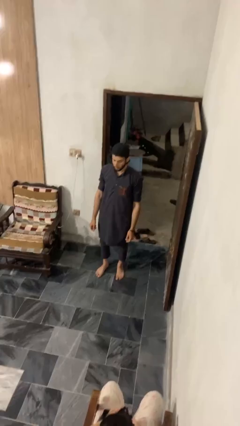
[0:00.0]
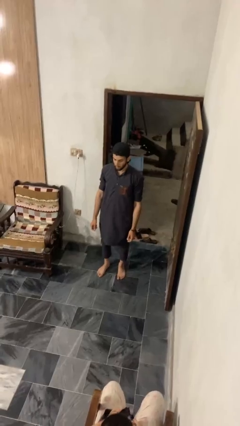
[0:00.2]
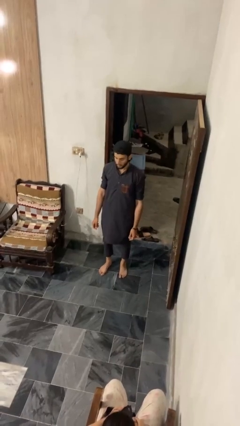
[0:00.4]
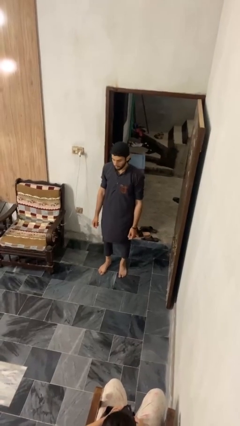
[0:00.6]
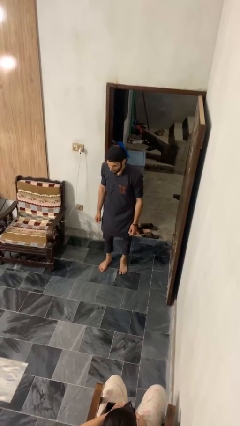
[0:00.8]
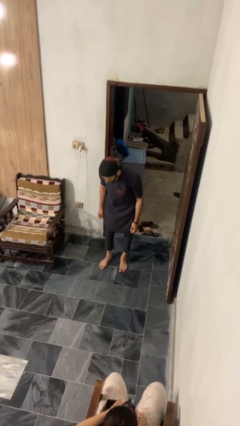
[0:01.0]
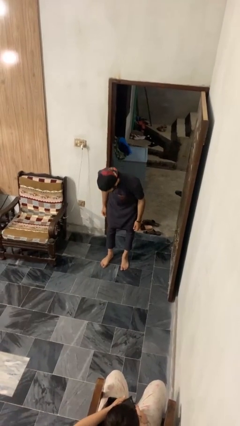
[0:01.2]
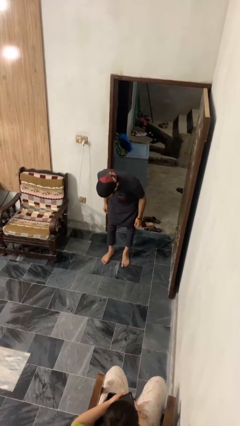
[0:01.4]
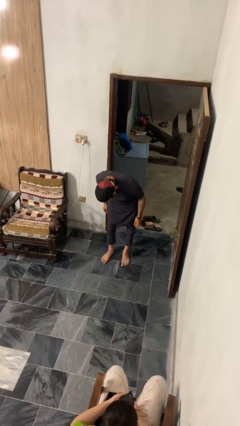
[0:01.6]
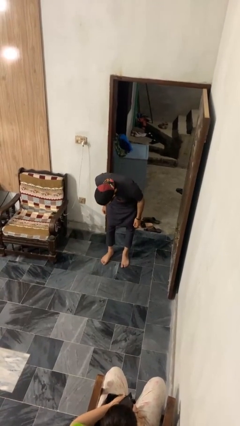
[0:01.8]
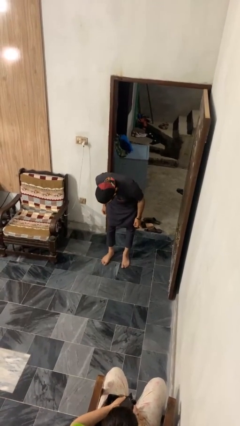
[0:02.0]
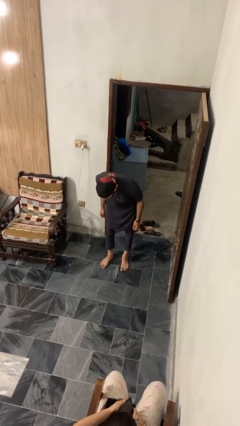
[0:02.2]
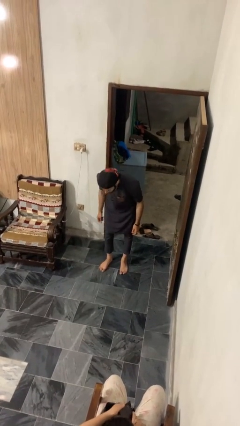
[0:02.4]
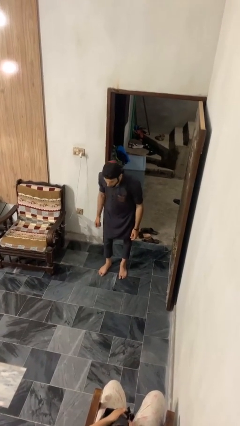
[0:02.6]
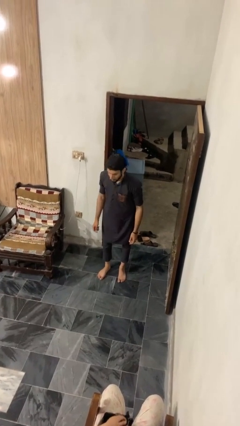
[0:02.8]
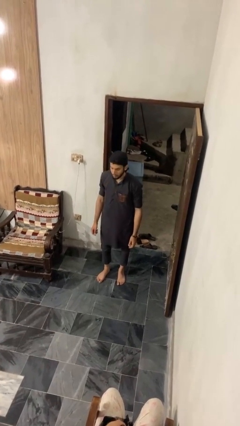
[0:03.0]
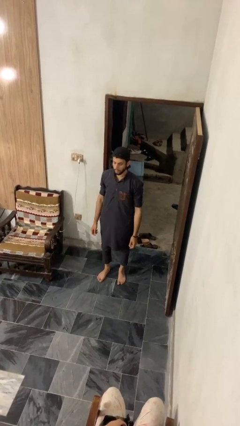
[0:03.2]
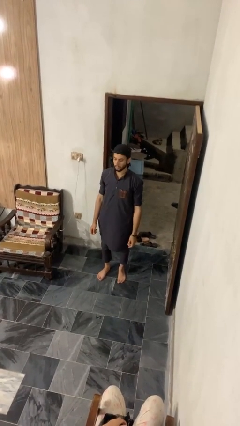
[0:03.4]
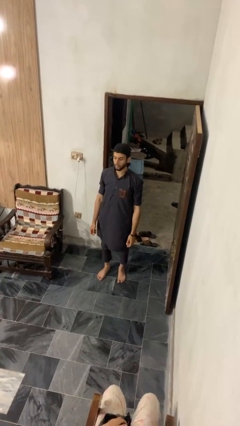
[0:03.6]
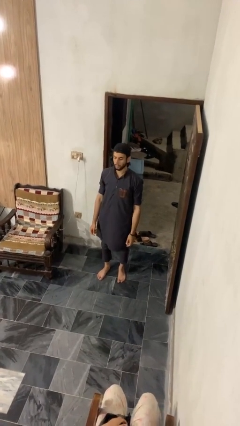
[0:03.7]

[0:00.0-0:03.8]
person bows

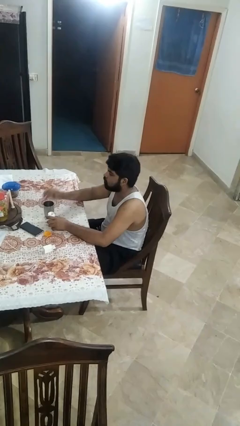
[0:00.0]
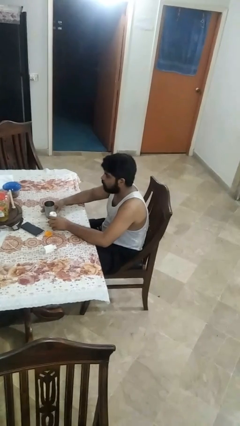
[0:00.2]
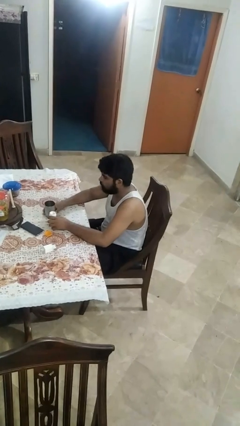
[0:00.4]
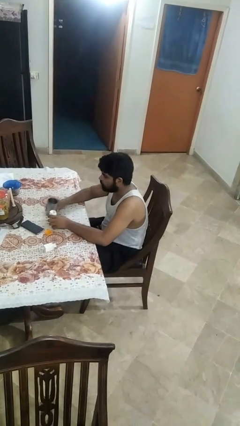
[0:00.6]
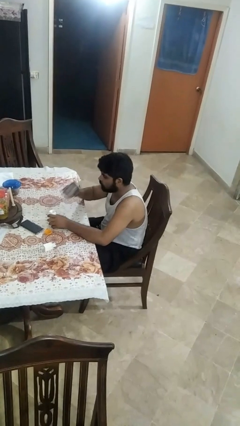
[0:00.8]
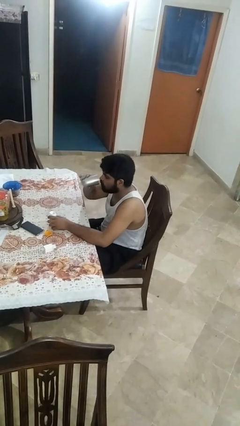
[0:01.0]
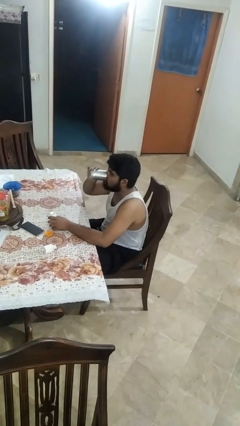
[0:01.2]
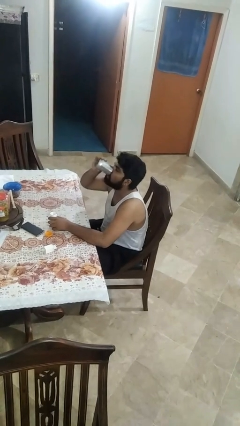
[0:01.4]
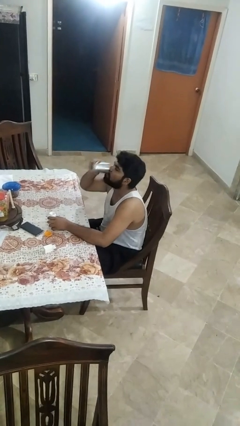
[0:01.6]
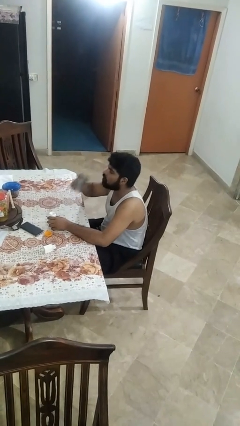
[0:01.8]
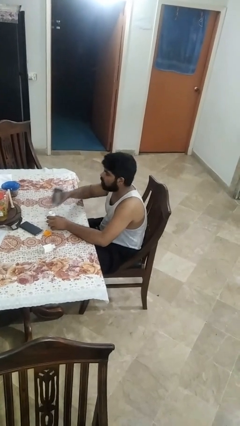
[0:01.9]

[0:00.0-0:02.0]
person drinks from cup

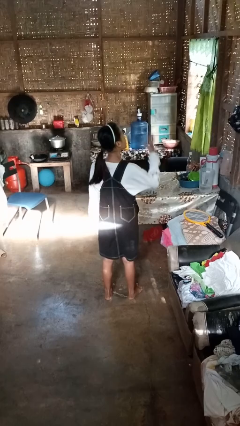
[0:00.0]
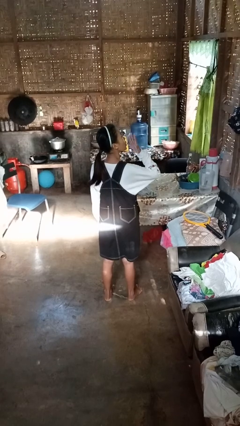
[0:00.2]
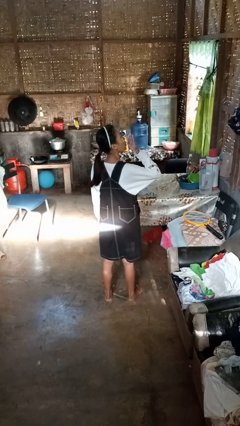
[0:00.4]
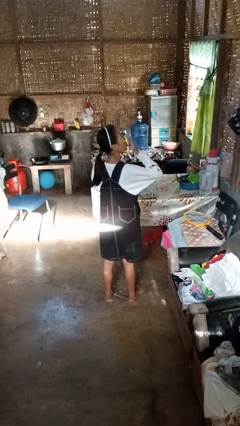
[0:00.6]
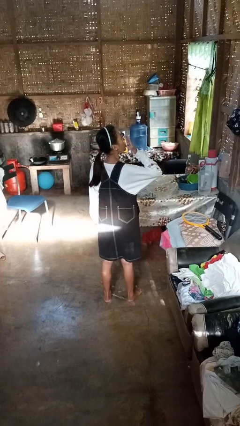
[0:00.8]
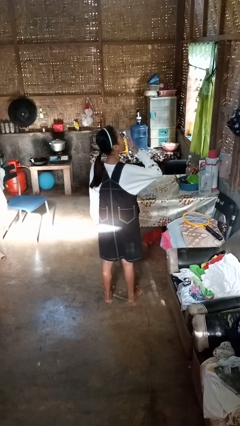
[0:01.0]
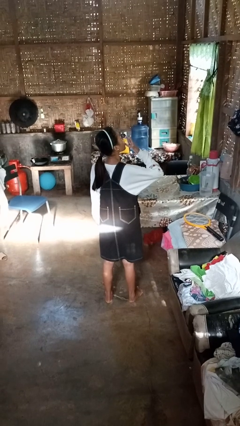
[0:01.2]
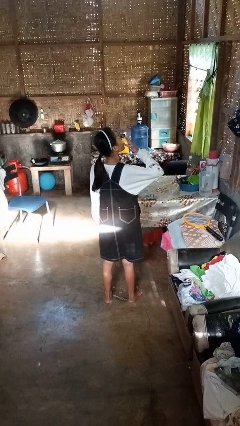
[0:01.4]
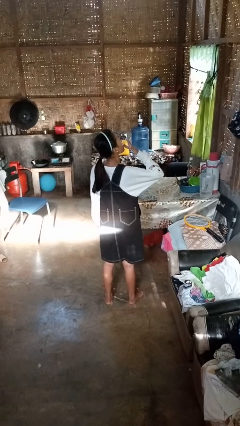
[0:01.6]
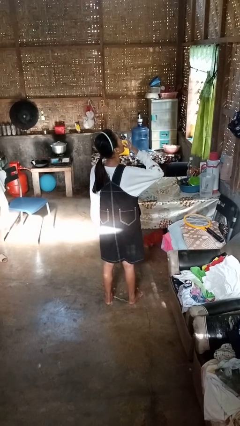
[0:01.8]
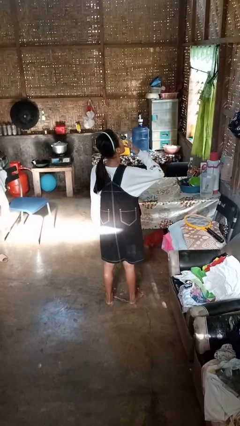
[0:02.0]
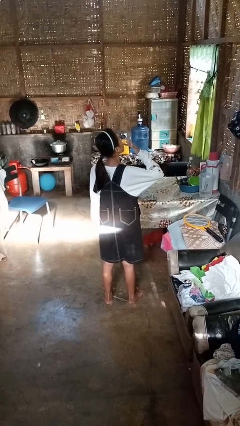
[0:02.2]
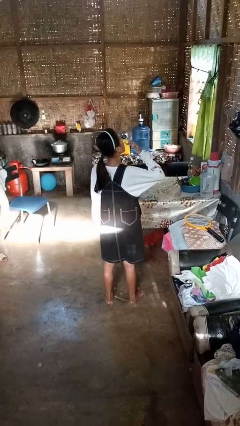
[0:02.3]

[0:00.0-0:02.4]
person licks fingers

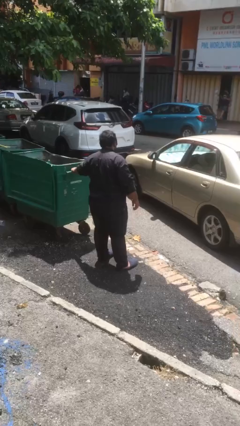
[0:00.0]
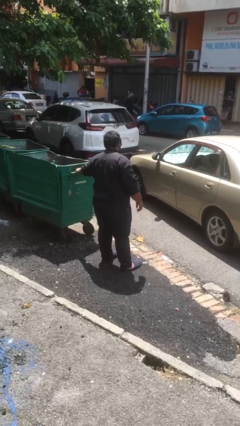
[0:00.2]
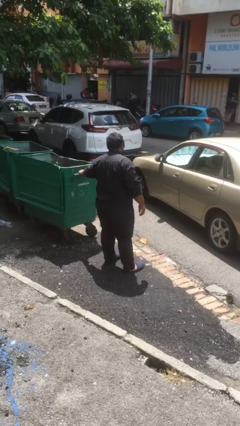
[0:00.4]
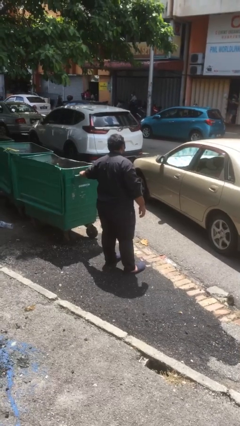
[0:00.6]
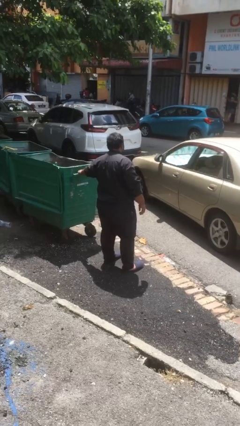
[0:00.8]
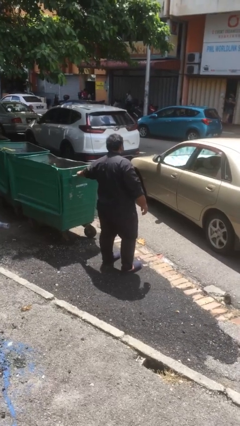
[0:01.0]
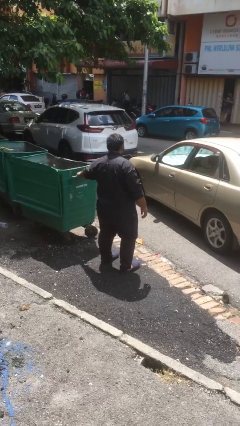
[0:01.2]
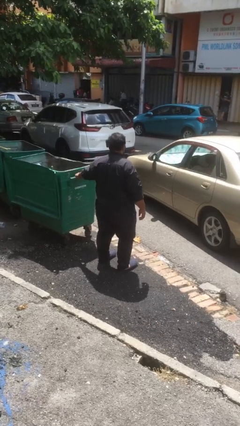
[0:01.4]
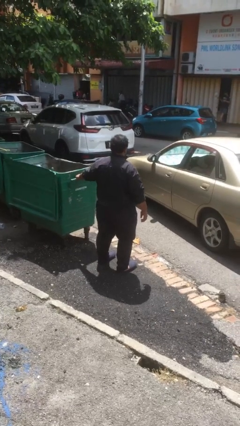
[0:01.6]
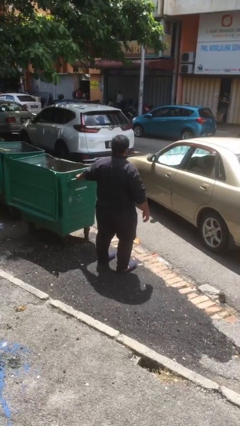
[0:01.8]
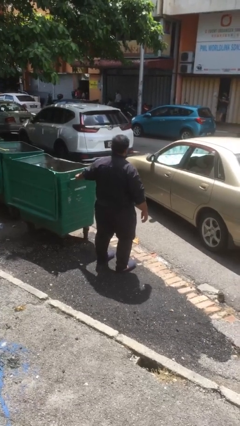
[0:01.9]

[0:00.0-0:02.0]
person pulls wheeled trashcan

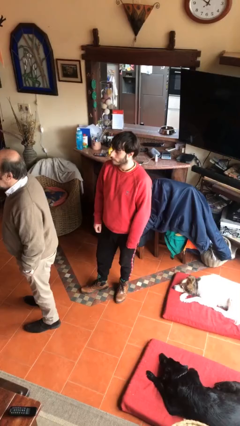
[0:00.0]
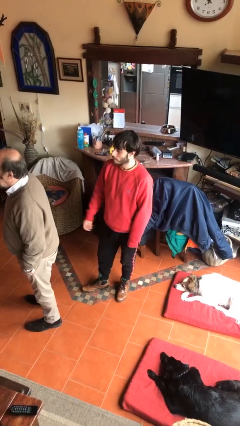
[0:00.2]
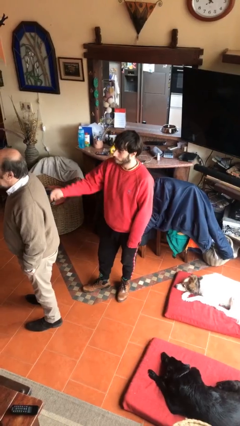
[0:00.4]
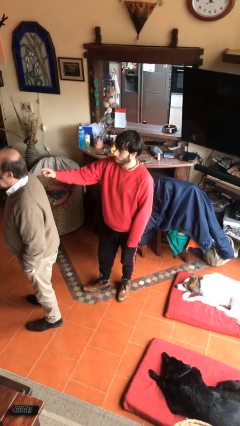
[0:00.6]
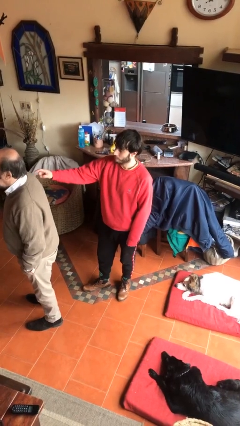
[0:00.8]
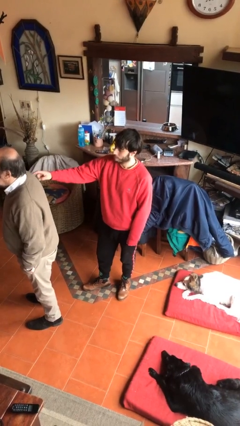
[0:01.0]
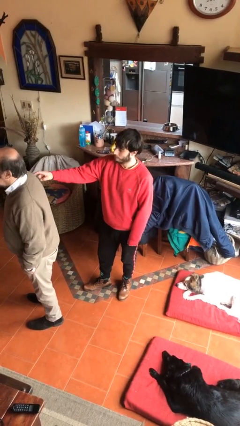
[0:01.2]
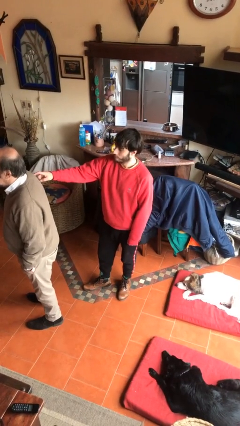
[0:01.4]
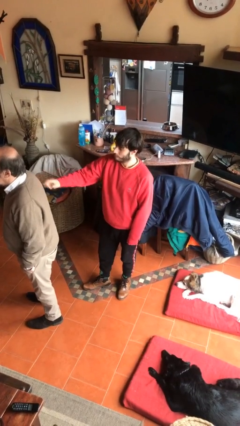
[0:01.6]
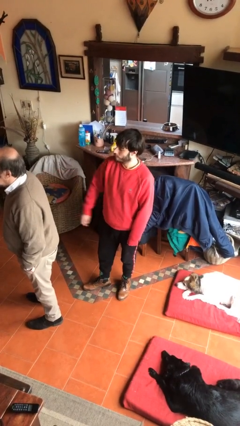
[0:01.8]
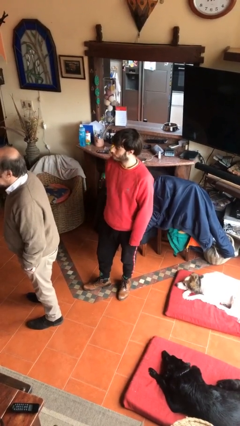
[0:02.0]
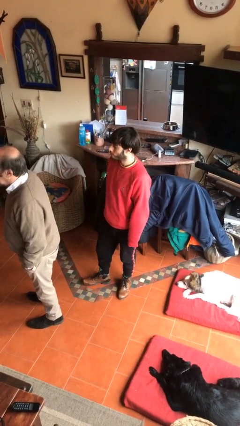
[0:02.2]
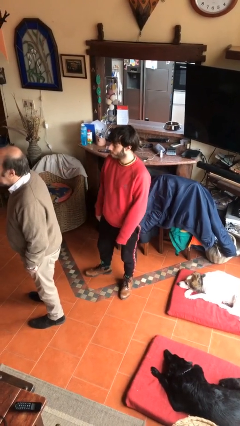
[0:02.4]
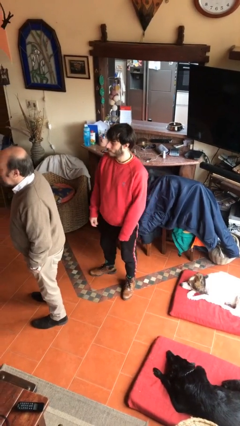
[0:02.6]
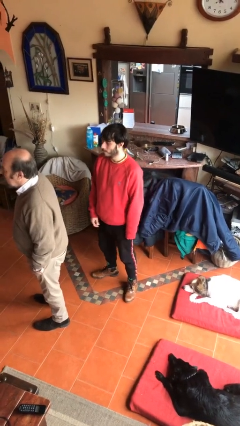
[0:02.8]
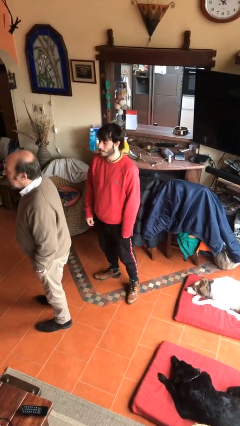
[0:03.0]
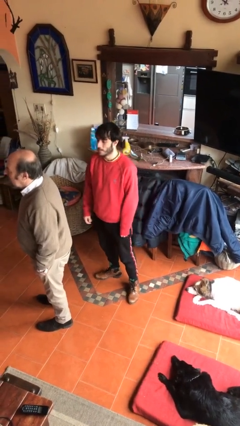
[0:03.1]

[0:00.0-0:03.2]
person touches back of person

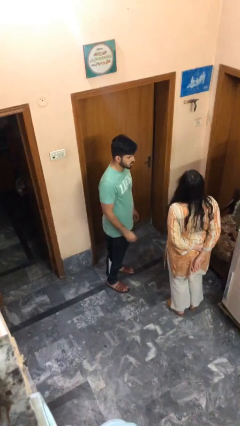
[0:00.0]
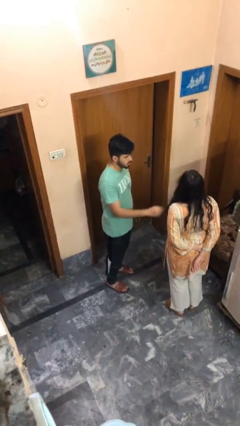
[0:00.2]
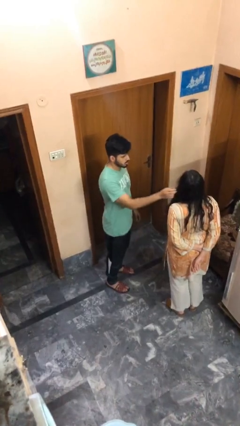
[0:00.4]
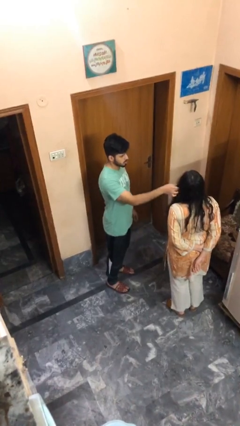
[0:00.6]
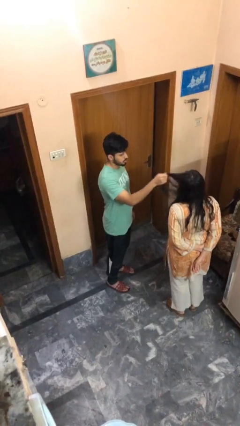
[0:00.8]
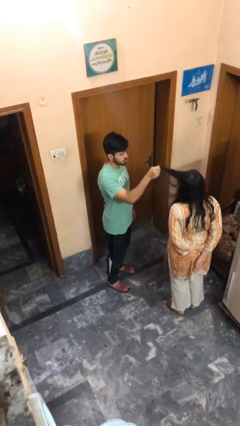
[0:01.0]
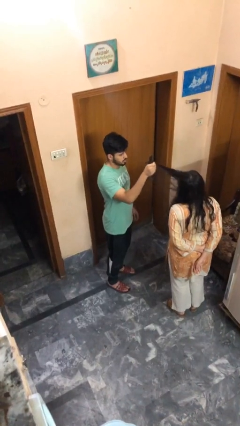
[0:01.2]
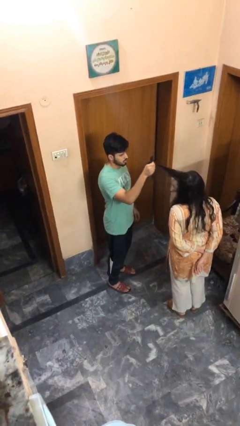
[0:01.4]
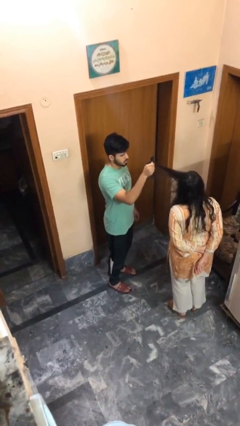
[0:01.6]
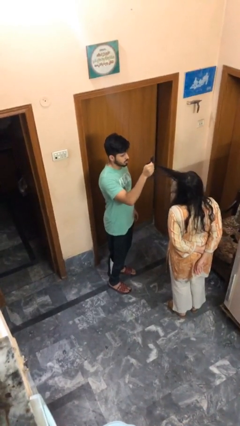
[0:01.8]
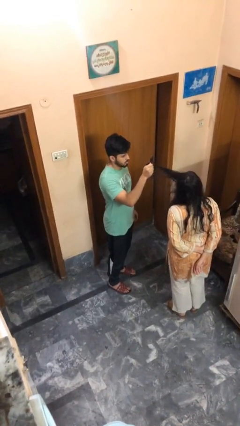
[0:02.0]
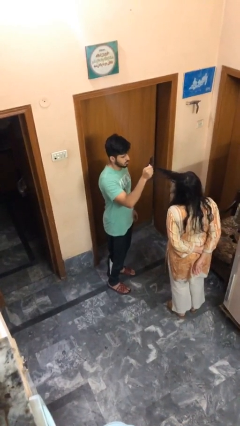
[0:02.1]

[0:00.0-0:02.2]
person grabs person by hair

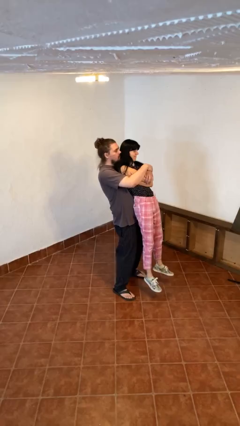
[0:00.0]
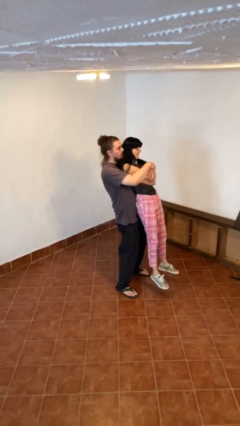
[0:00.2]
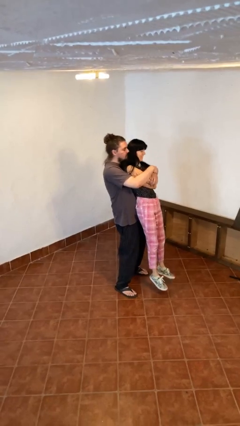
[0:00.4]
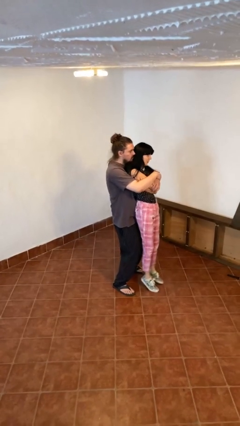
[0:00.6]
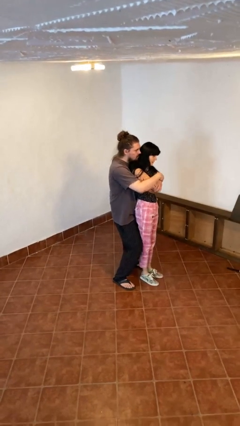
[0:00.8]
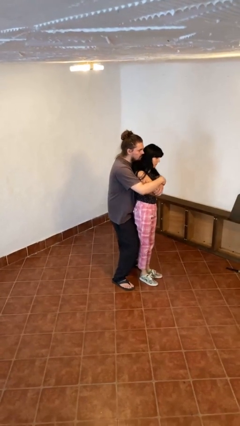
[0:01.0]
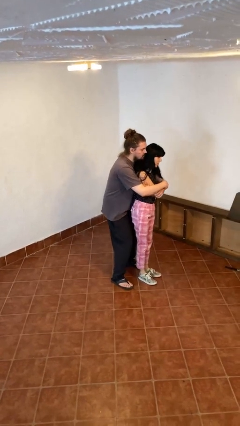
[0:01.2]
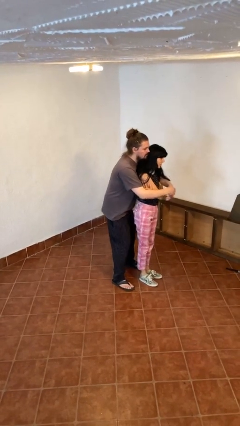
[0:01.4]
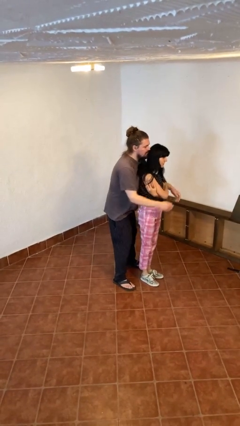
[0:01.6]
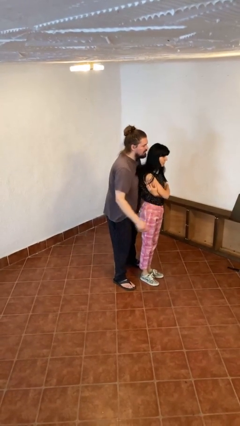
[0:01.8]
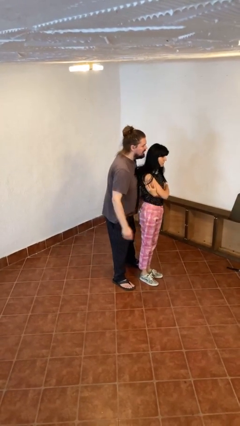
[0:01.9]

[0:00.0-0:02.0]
person puts down person
